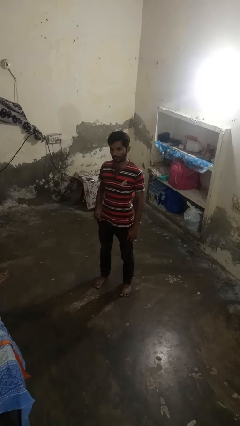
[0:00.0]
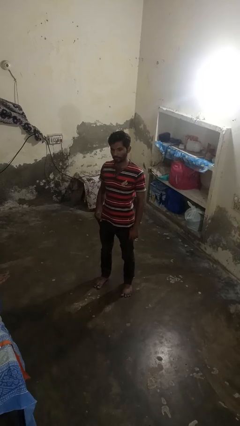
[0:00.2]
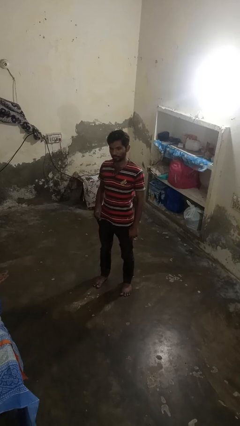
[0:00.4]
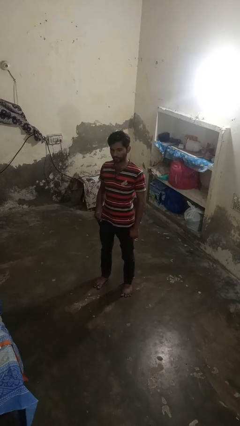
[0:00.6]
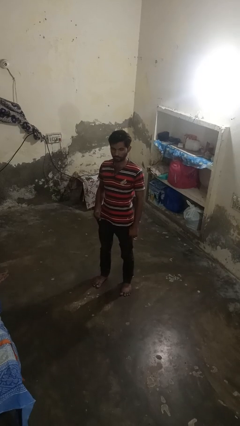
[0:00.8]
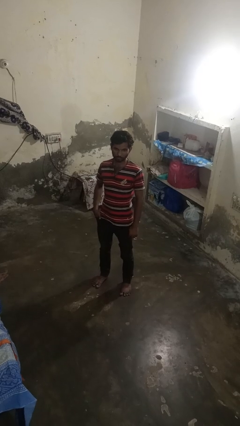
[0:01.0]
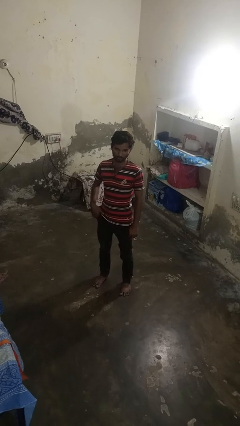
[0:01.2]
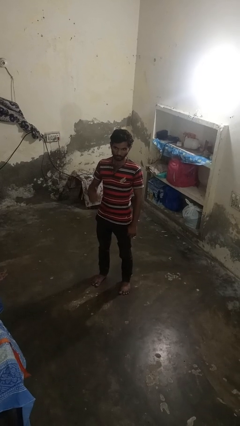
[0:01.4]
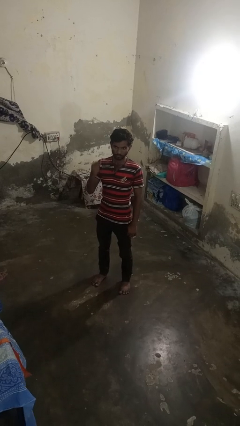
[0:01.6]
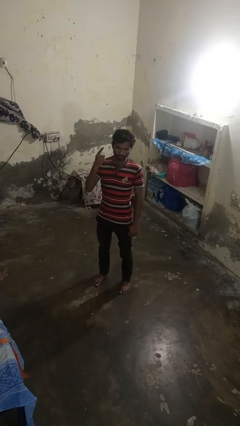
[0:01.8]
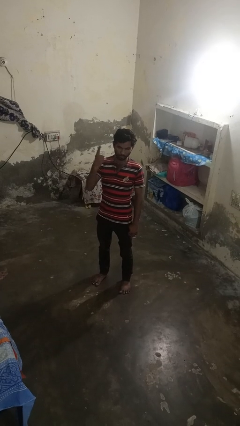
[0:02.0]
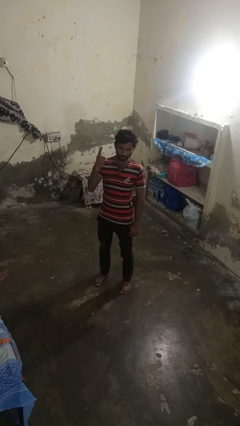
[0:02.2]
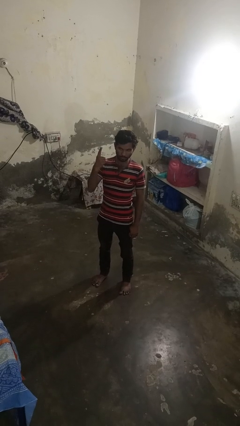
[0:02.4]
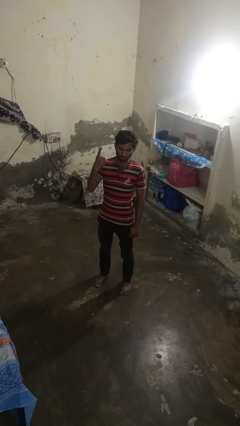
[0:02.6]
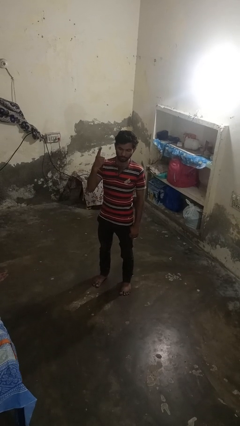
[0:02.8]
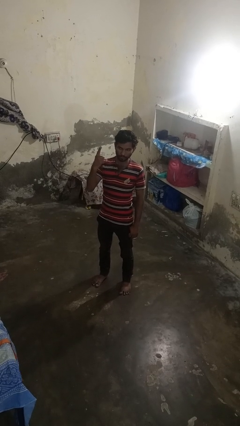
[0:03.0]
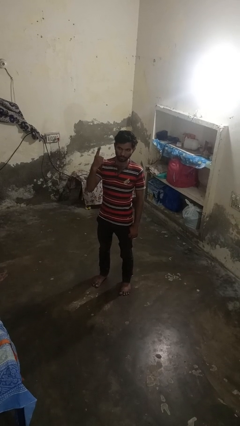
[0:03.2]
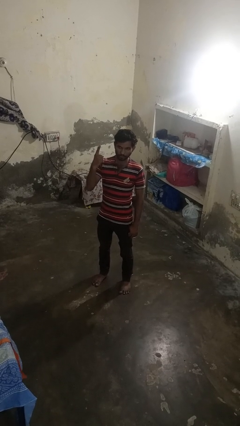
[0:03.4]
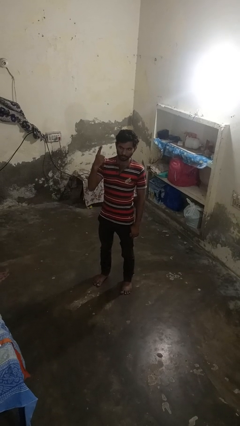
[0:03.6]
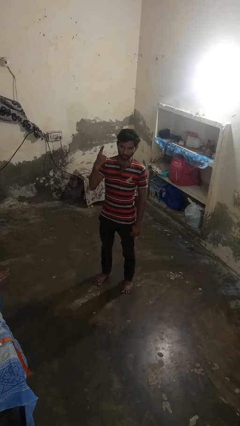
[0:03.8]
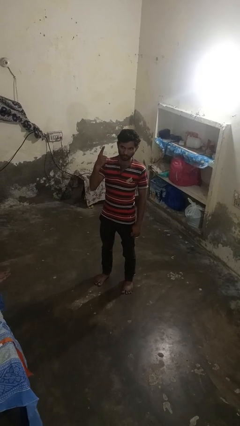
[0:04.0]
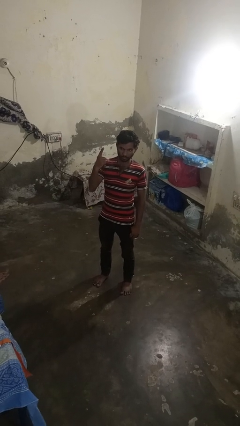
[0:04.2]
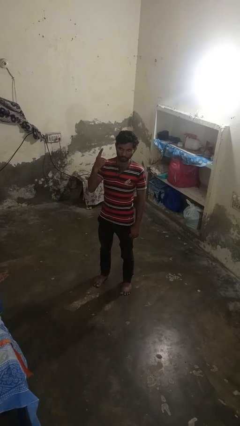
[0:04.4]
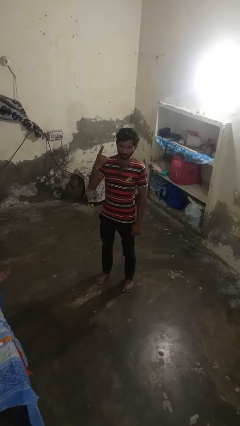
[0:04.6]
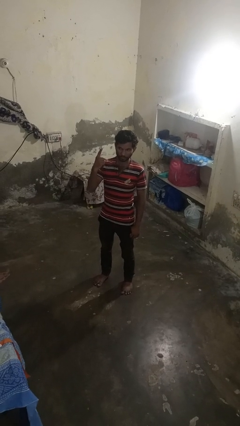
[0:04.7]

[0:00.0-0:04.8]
person gestures number one

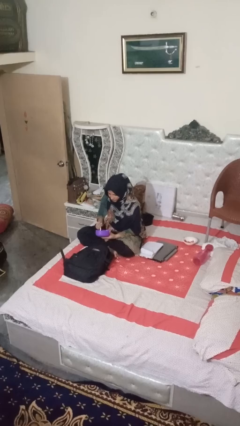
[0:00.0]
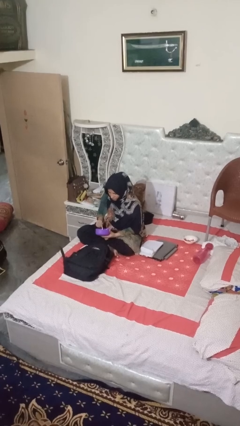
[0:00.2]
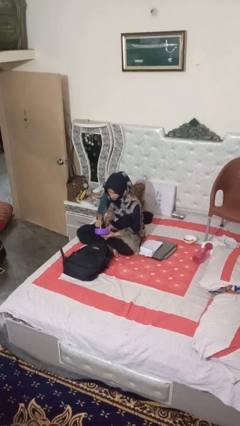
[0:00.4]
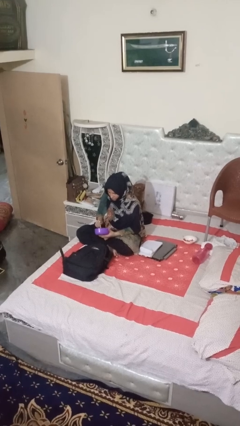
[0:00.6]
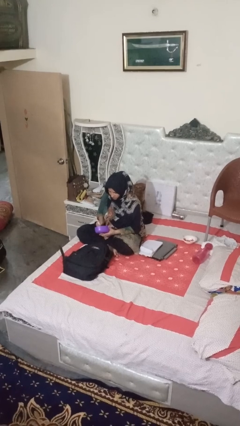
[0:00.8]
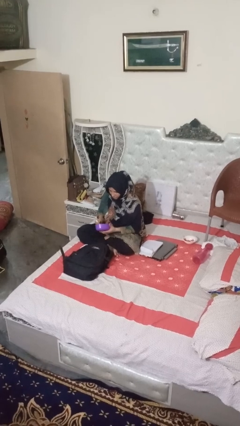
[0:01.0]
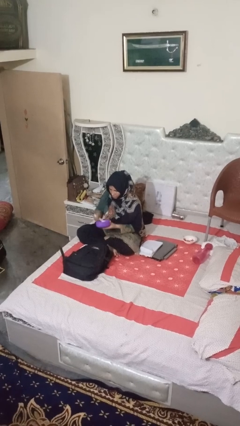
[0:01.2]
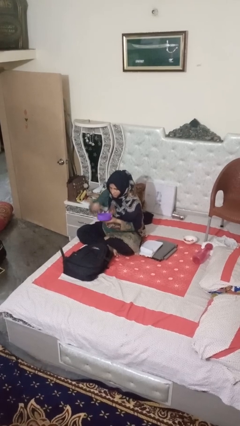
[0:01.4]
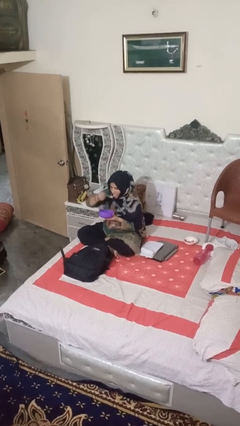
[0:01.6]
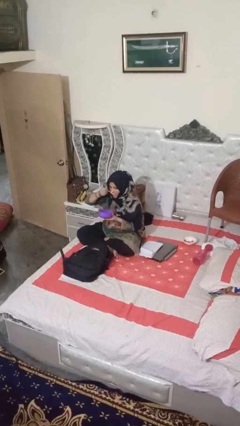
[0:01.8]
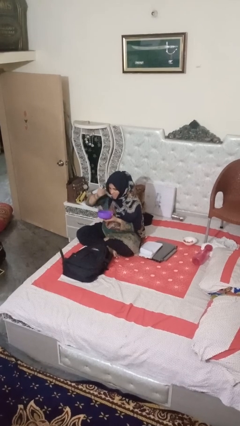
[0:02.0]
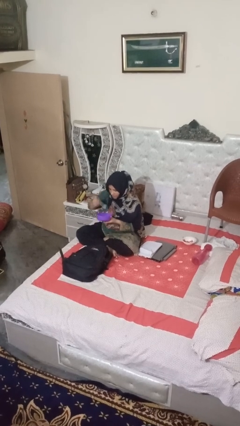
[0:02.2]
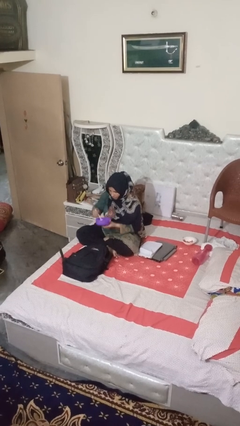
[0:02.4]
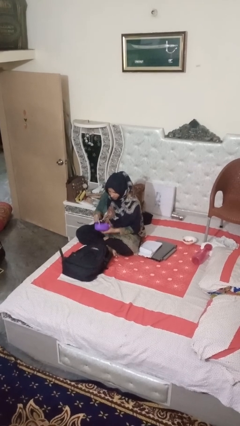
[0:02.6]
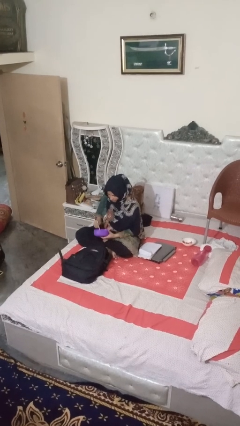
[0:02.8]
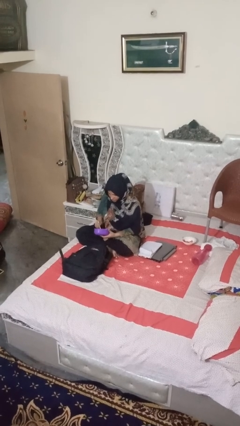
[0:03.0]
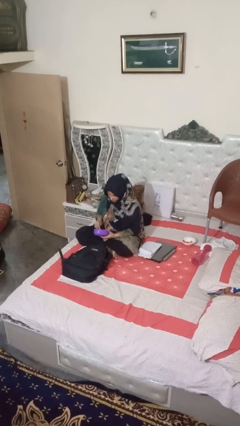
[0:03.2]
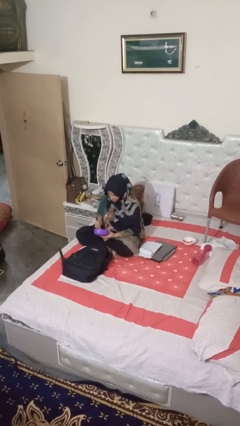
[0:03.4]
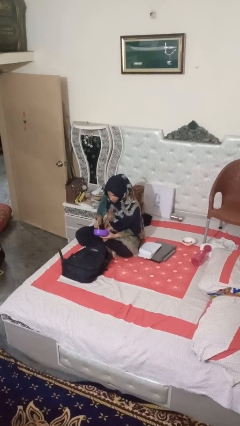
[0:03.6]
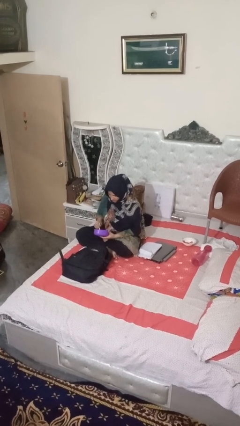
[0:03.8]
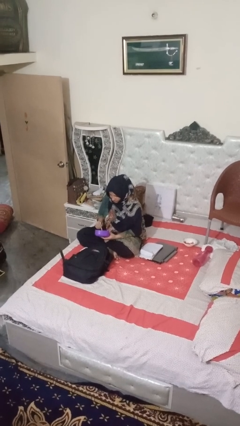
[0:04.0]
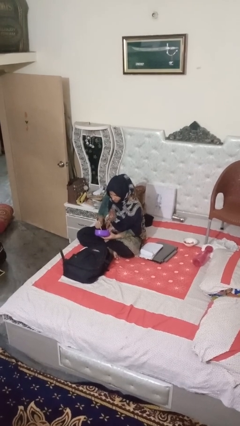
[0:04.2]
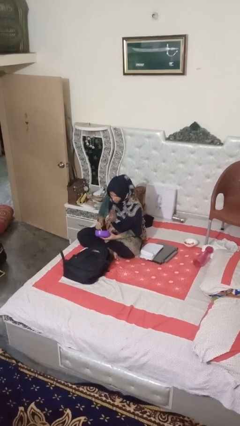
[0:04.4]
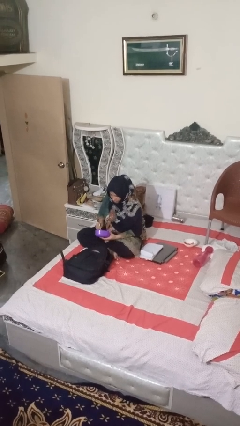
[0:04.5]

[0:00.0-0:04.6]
person eats snack from bag

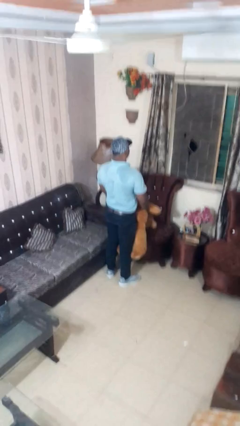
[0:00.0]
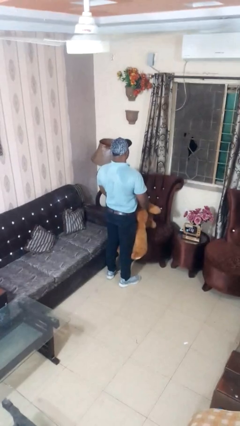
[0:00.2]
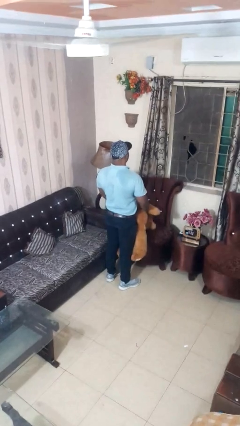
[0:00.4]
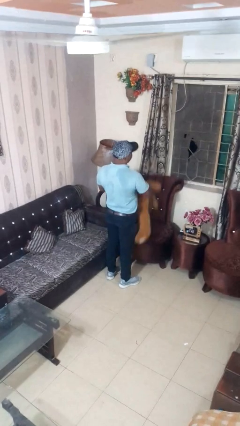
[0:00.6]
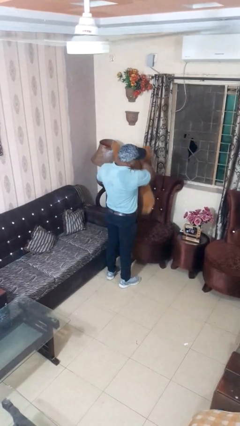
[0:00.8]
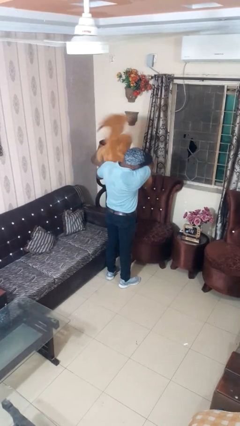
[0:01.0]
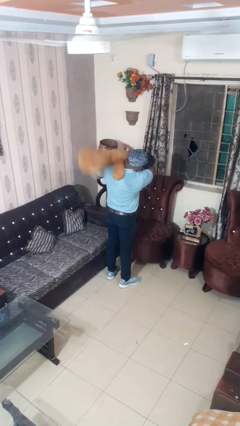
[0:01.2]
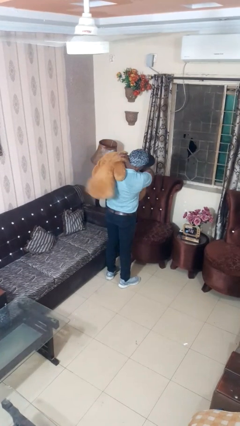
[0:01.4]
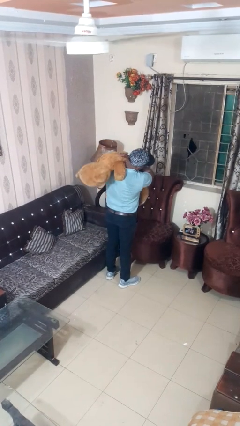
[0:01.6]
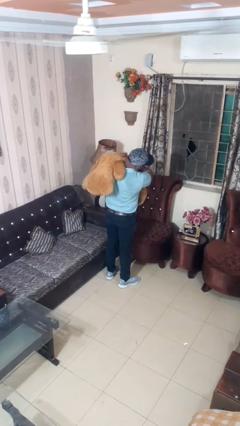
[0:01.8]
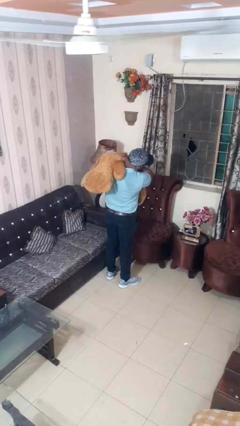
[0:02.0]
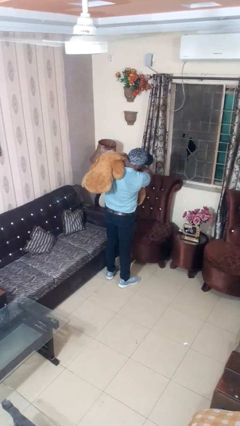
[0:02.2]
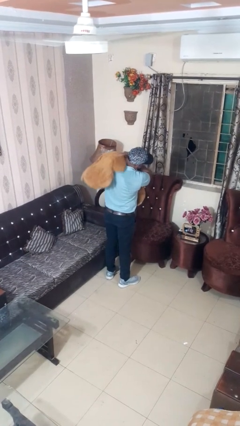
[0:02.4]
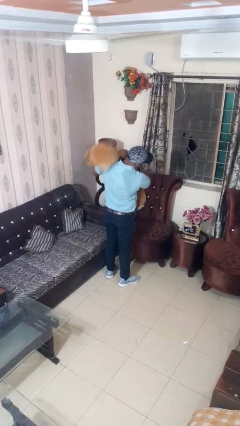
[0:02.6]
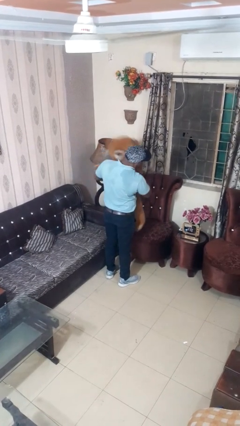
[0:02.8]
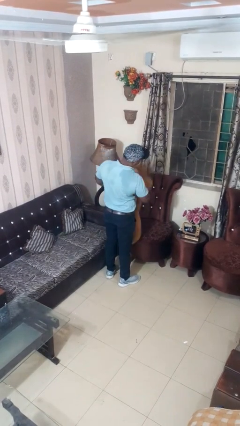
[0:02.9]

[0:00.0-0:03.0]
person hugs stuffed animal

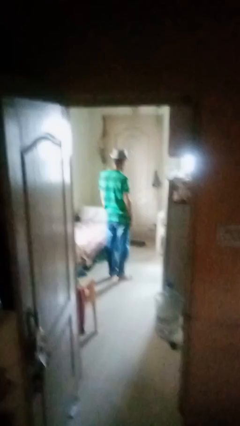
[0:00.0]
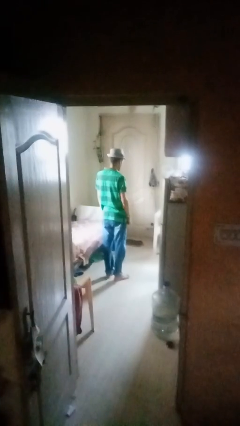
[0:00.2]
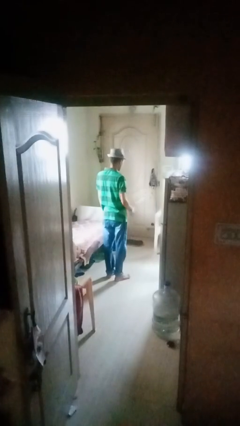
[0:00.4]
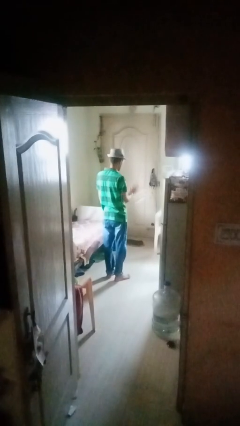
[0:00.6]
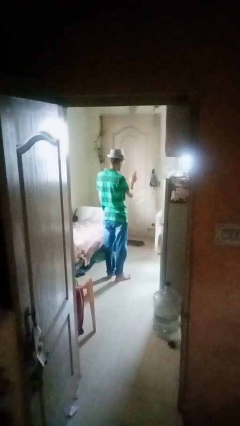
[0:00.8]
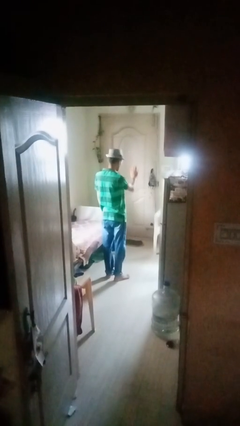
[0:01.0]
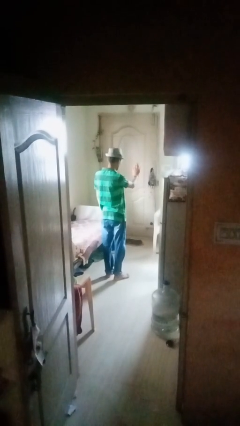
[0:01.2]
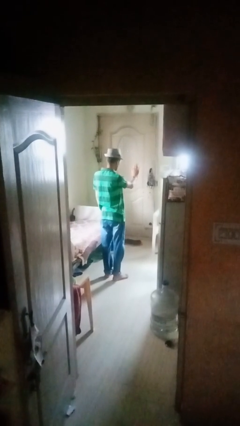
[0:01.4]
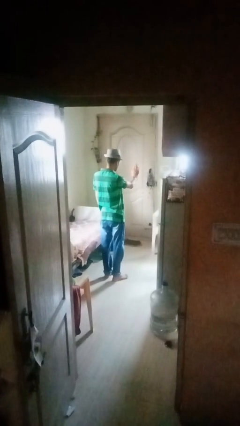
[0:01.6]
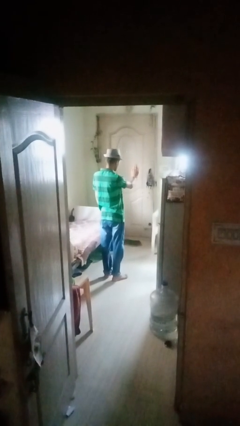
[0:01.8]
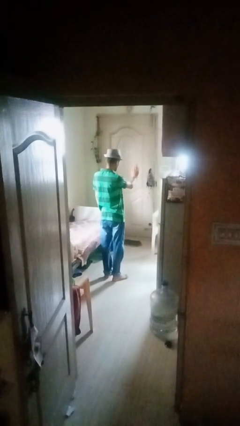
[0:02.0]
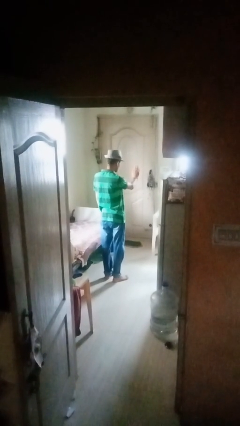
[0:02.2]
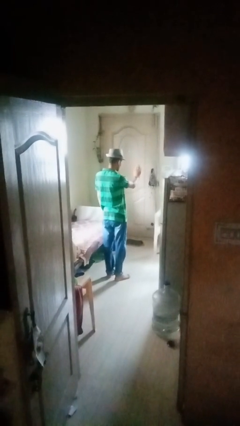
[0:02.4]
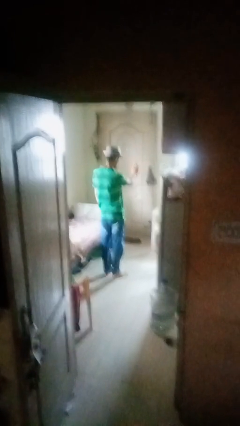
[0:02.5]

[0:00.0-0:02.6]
person gestures stop

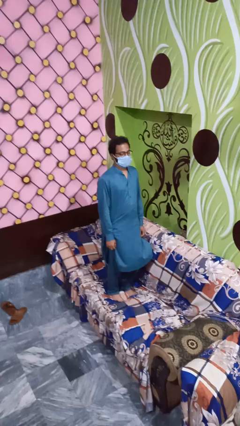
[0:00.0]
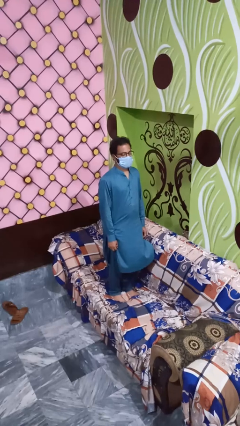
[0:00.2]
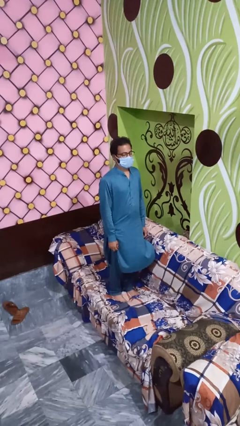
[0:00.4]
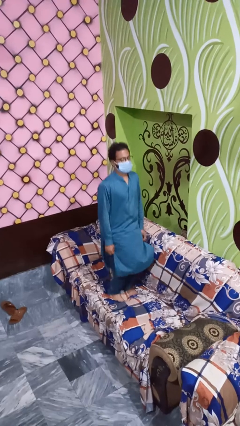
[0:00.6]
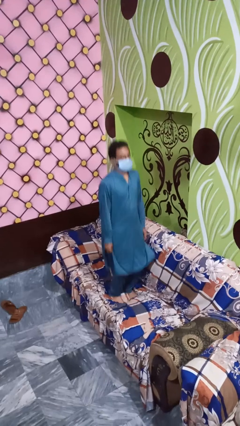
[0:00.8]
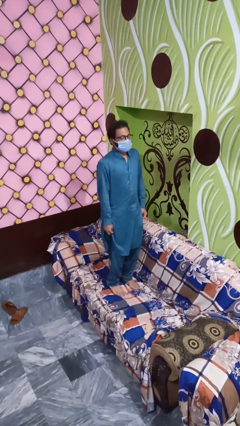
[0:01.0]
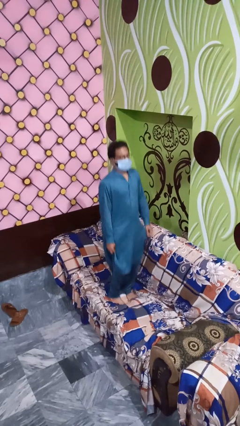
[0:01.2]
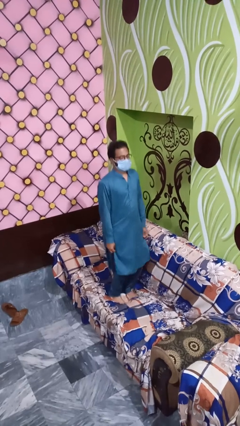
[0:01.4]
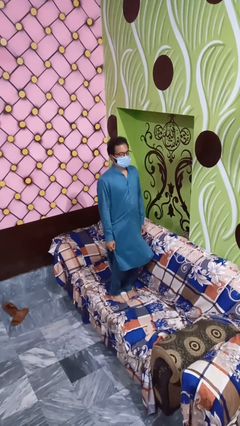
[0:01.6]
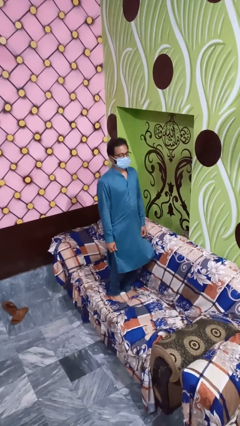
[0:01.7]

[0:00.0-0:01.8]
person jumps on couch

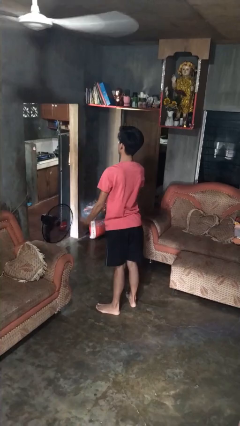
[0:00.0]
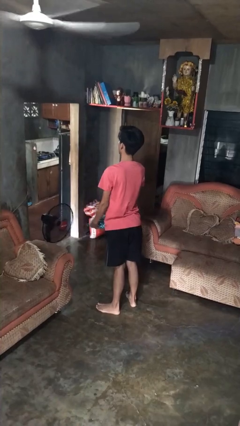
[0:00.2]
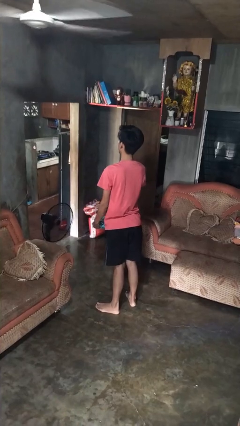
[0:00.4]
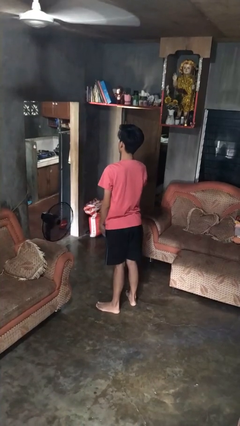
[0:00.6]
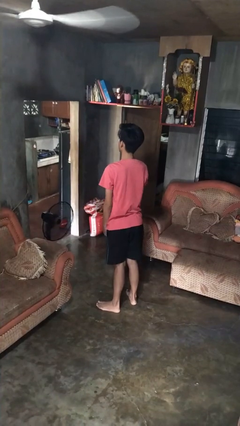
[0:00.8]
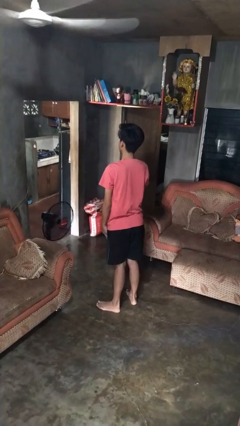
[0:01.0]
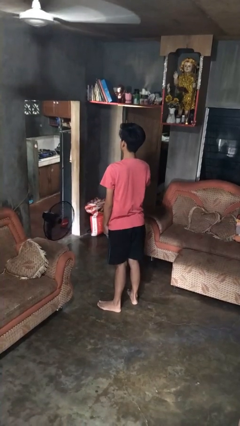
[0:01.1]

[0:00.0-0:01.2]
person catches dropped object
